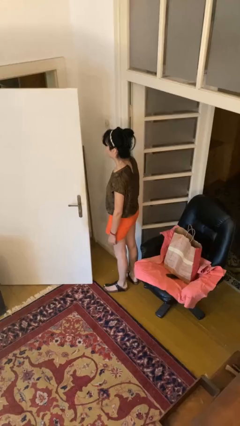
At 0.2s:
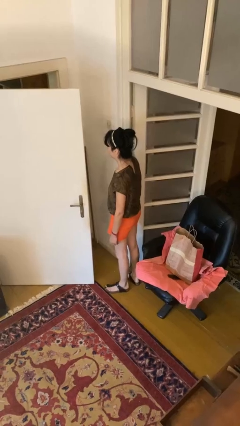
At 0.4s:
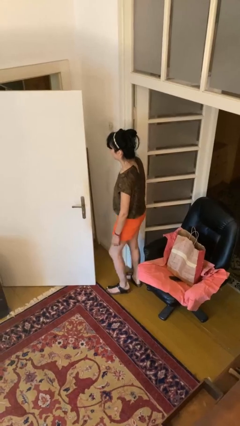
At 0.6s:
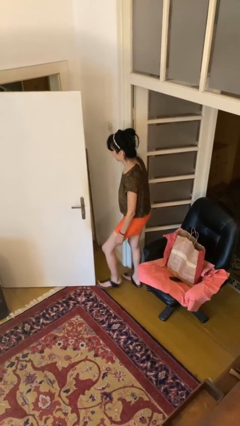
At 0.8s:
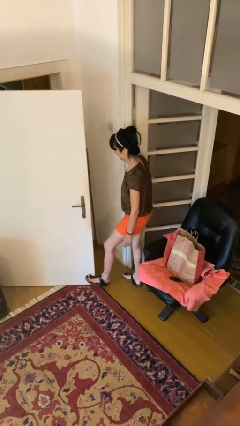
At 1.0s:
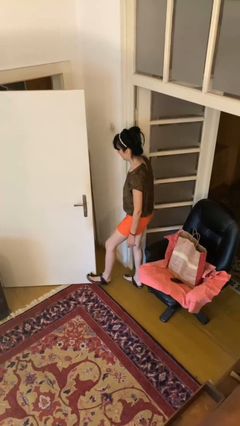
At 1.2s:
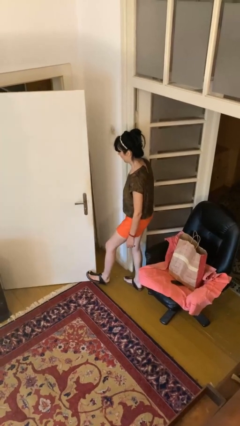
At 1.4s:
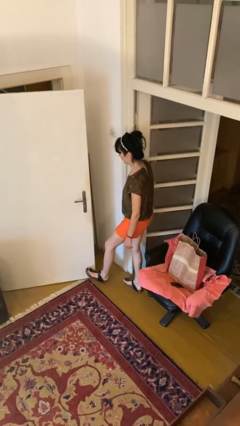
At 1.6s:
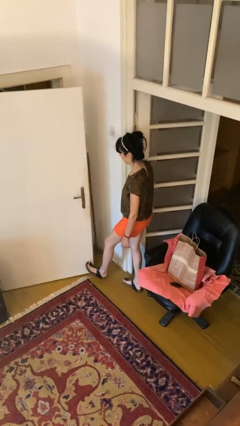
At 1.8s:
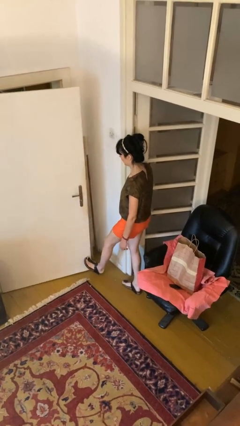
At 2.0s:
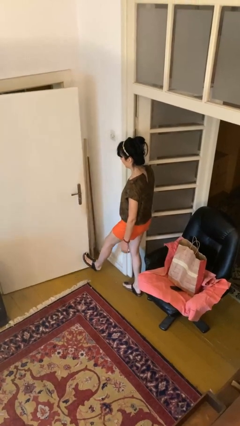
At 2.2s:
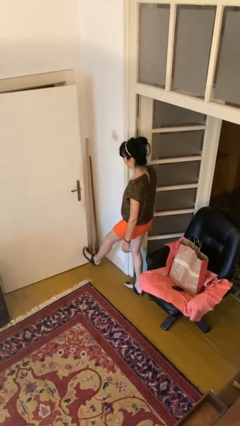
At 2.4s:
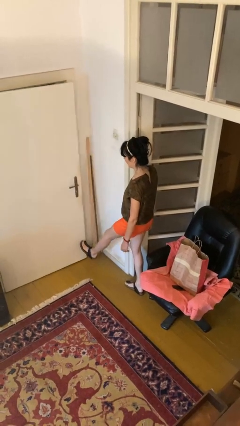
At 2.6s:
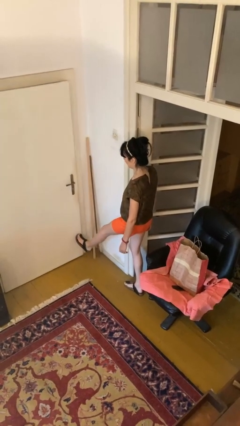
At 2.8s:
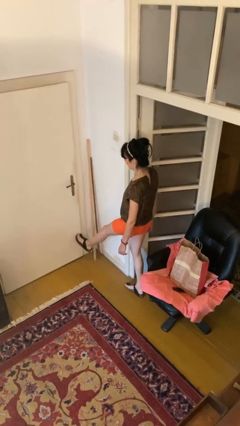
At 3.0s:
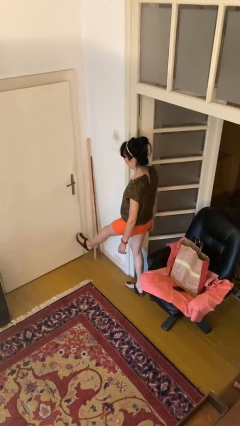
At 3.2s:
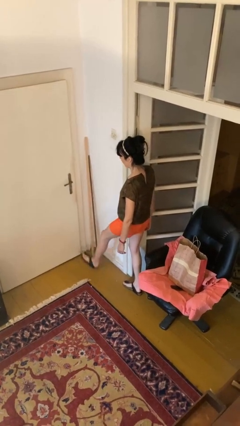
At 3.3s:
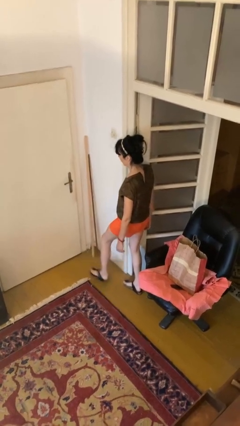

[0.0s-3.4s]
person closes door with foot

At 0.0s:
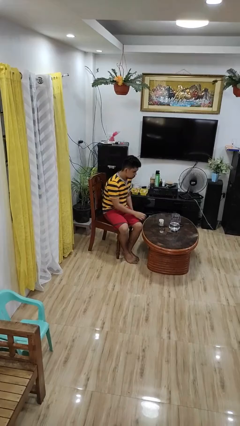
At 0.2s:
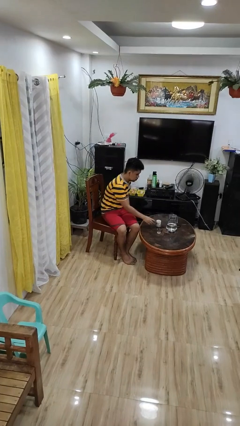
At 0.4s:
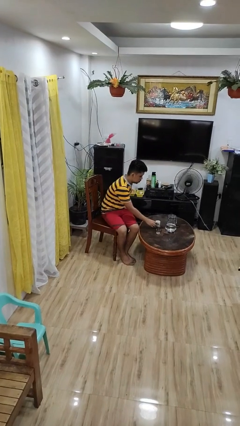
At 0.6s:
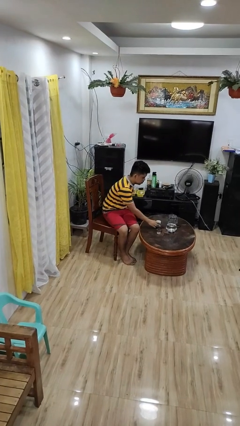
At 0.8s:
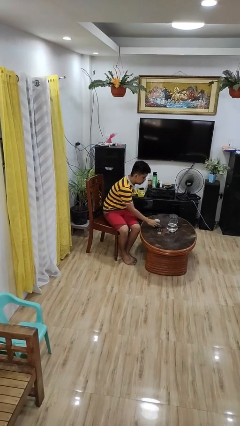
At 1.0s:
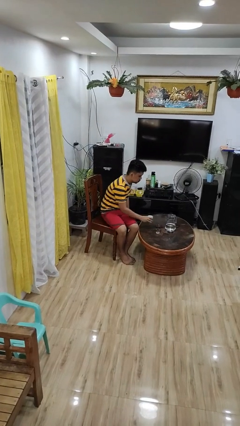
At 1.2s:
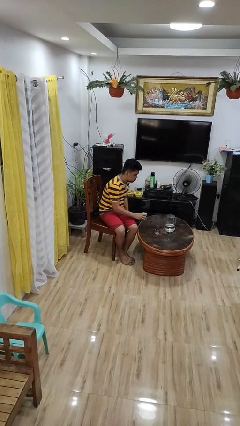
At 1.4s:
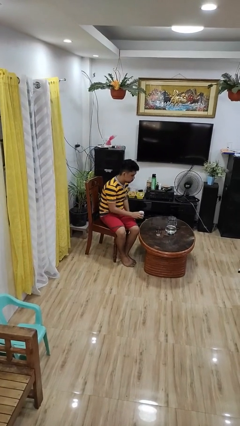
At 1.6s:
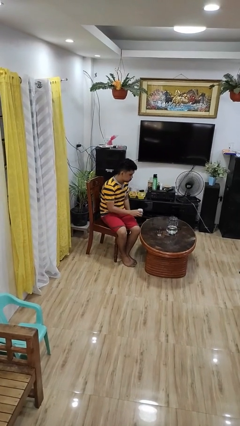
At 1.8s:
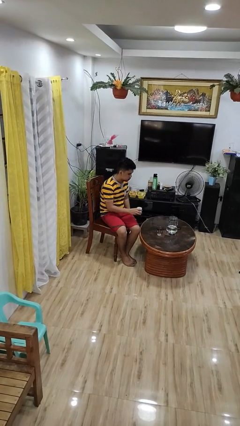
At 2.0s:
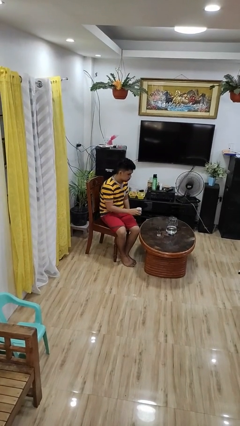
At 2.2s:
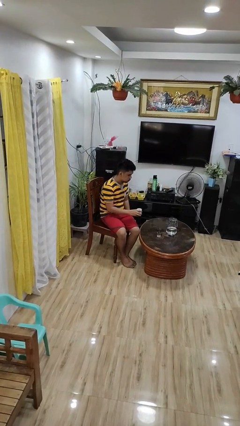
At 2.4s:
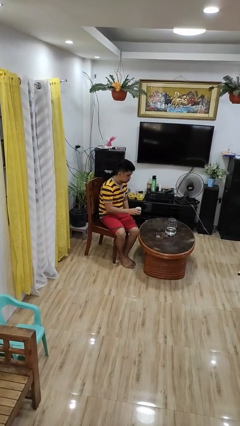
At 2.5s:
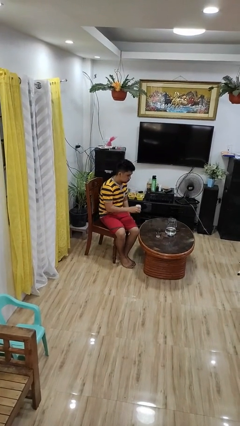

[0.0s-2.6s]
person picks up object from table

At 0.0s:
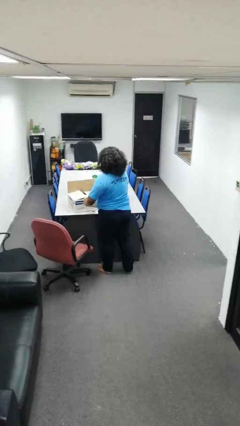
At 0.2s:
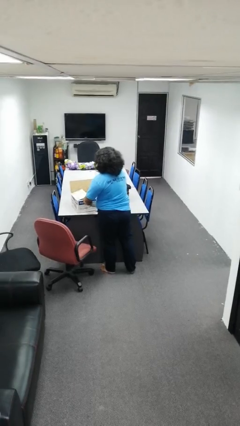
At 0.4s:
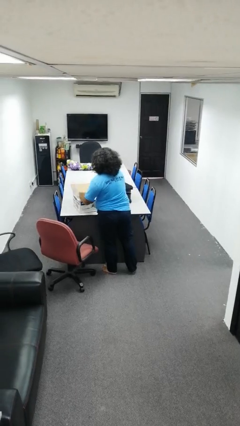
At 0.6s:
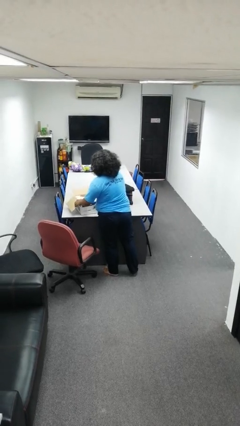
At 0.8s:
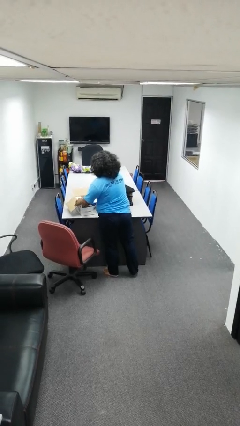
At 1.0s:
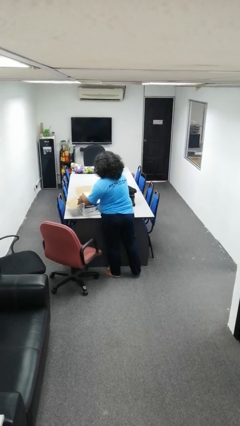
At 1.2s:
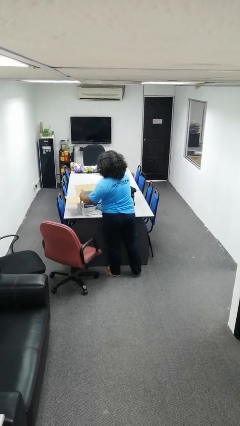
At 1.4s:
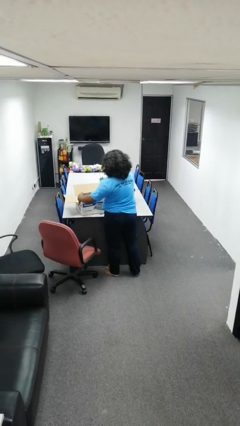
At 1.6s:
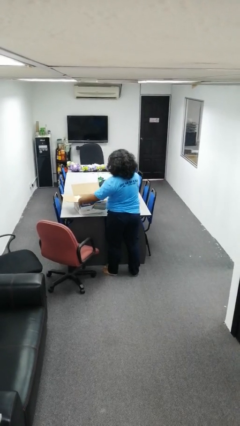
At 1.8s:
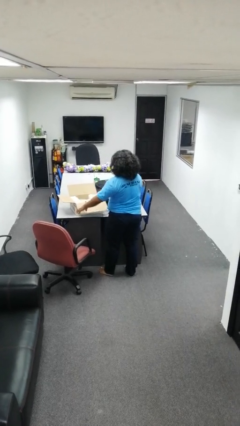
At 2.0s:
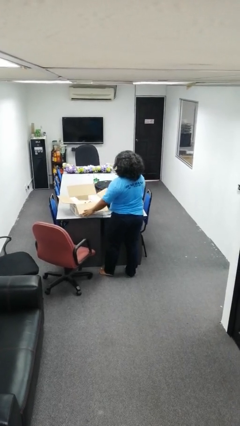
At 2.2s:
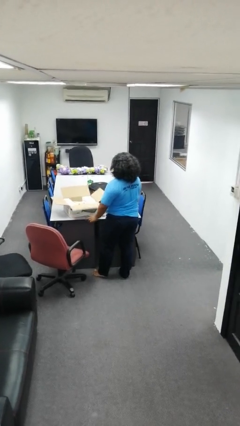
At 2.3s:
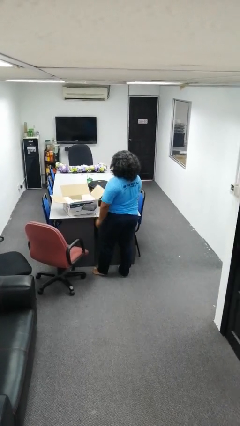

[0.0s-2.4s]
person opens box

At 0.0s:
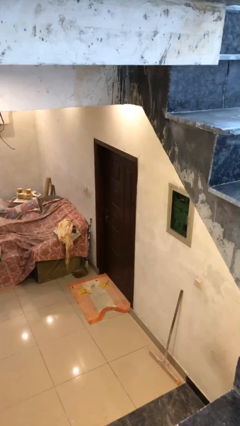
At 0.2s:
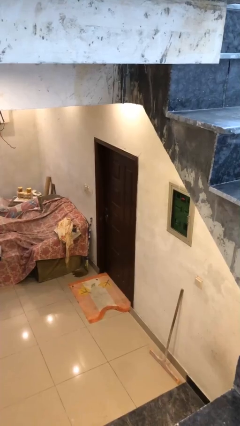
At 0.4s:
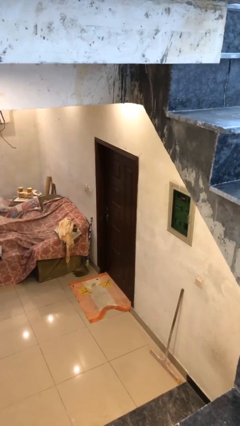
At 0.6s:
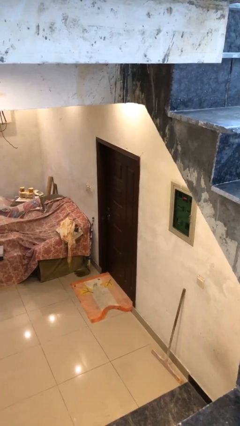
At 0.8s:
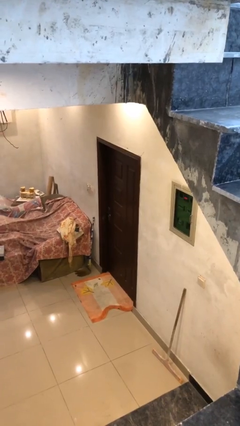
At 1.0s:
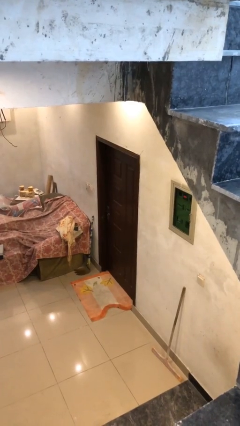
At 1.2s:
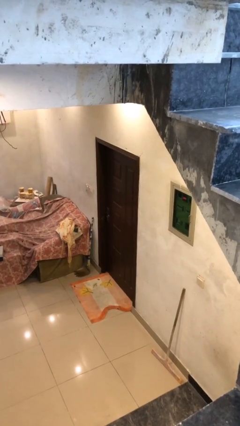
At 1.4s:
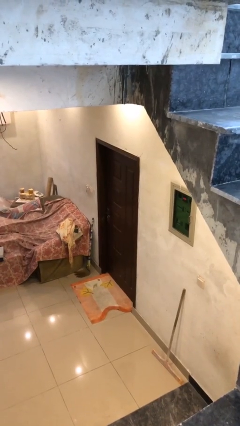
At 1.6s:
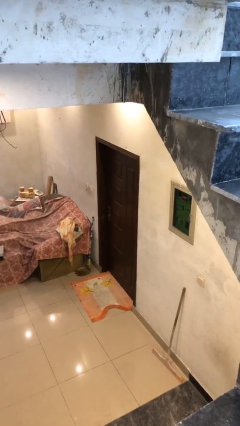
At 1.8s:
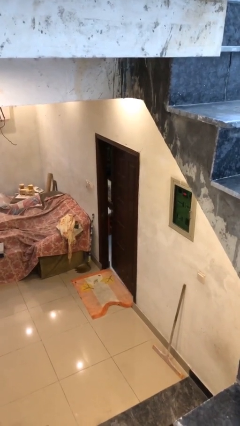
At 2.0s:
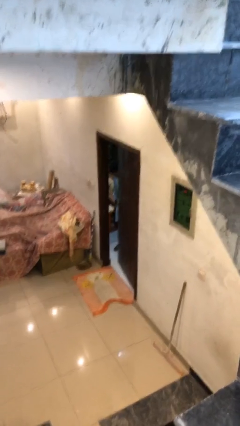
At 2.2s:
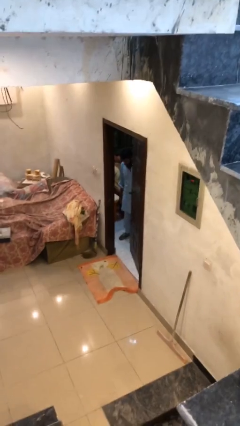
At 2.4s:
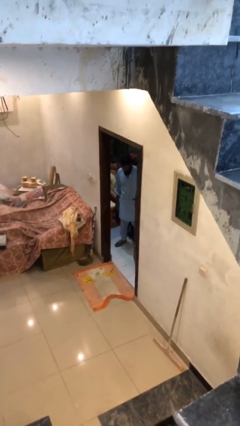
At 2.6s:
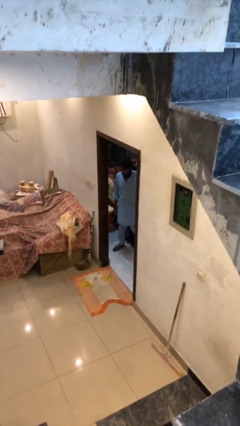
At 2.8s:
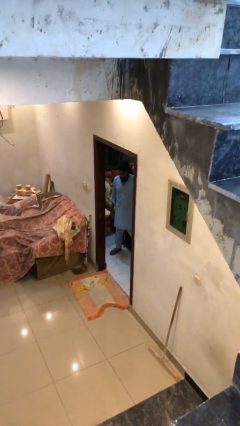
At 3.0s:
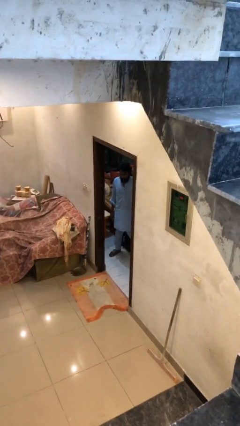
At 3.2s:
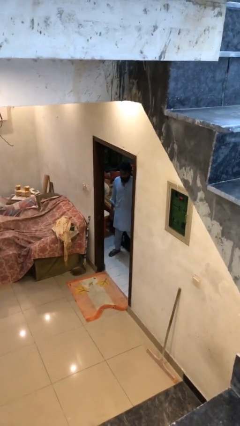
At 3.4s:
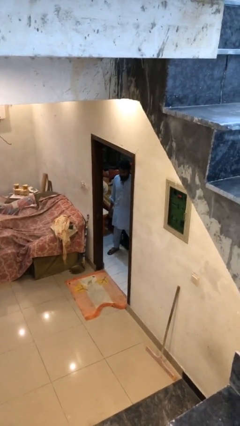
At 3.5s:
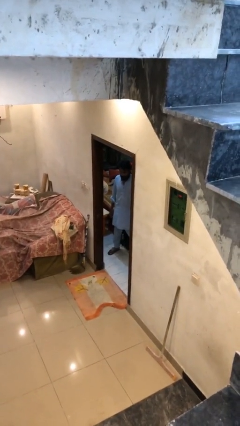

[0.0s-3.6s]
person opens facility door

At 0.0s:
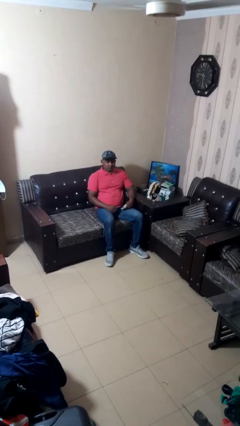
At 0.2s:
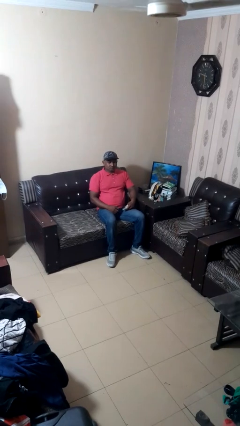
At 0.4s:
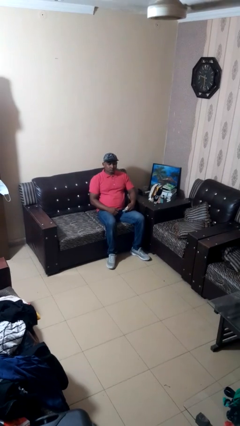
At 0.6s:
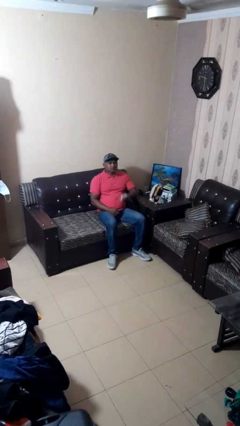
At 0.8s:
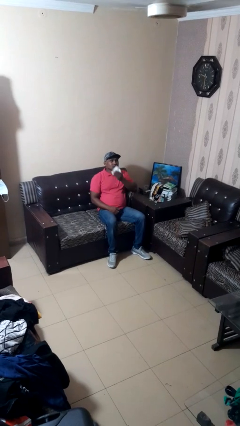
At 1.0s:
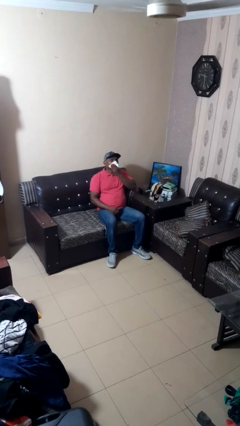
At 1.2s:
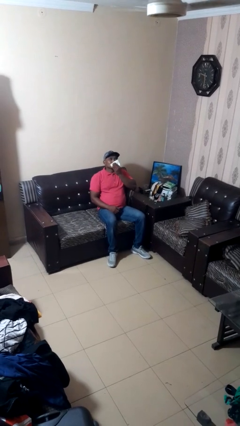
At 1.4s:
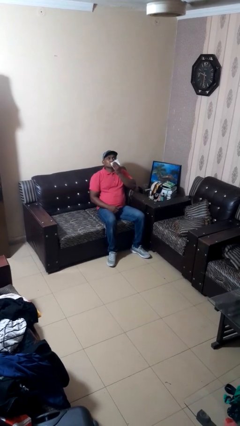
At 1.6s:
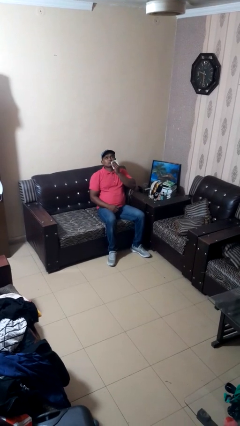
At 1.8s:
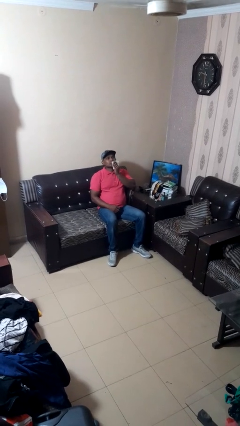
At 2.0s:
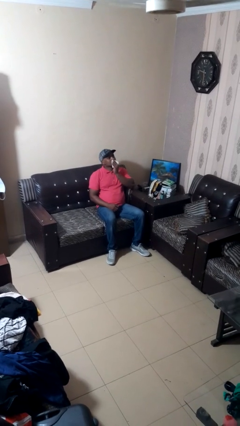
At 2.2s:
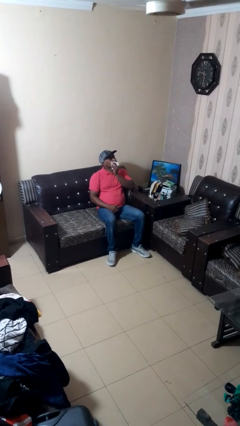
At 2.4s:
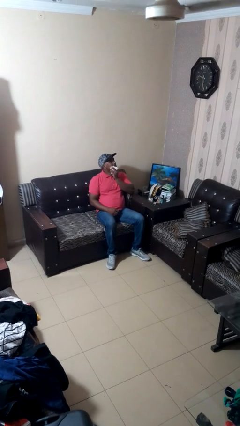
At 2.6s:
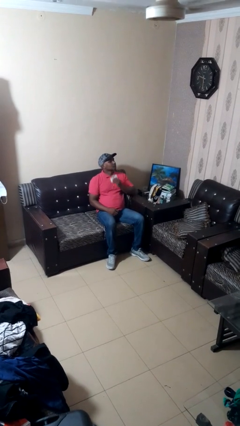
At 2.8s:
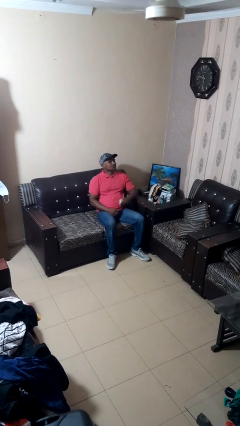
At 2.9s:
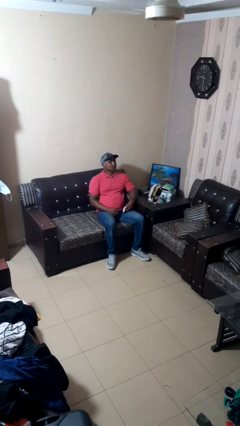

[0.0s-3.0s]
person wipes mouth with napkin

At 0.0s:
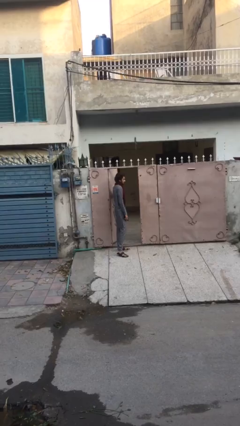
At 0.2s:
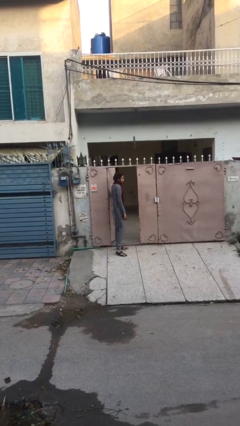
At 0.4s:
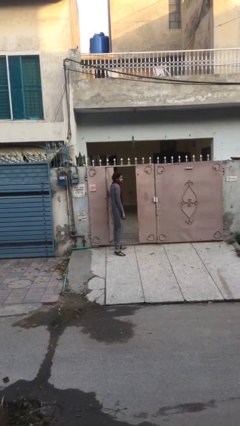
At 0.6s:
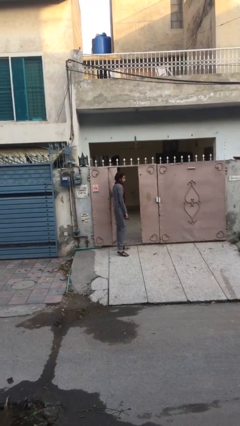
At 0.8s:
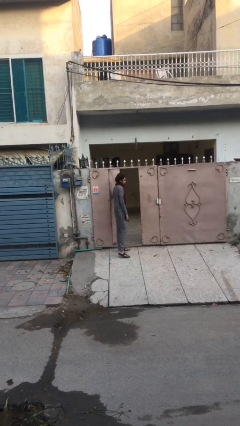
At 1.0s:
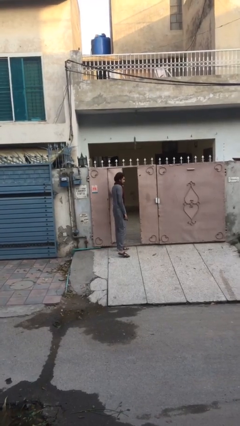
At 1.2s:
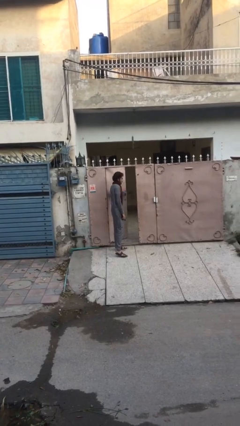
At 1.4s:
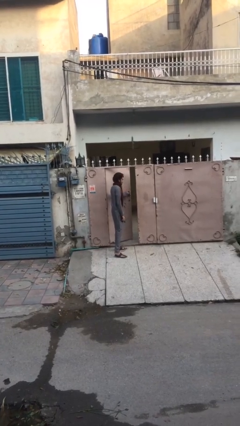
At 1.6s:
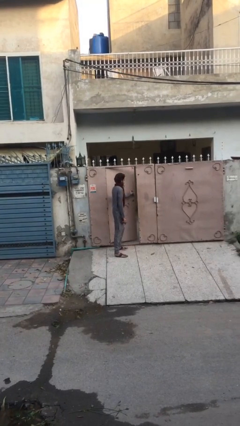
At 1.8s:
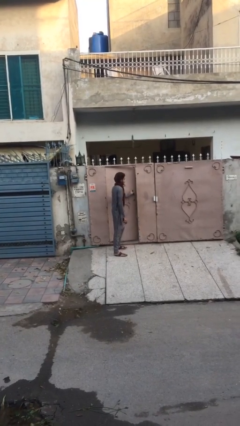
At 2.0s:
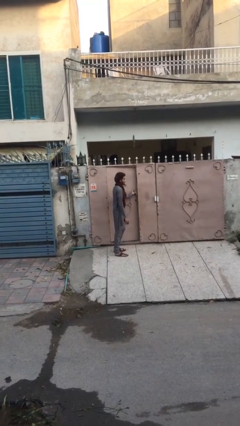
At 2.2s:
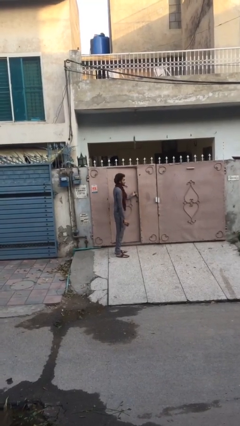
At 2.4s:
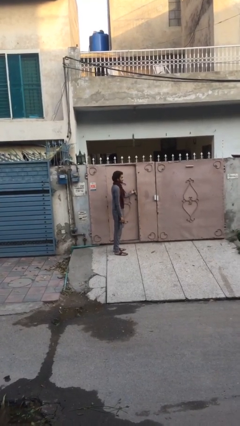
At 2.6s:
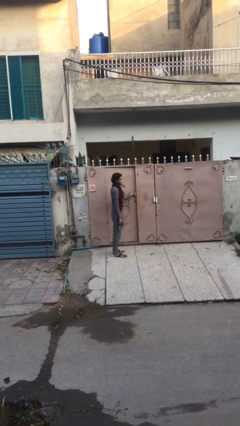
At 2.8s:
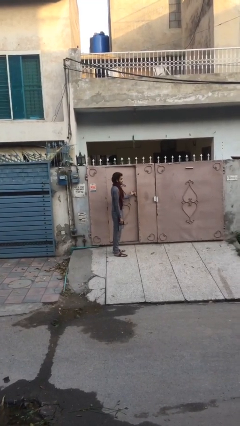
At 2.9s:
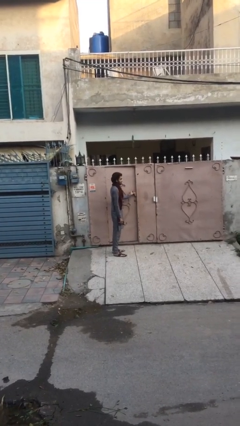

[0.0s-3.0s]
person closes facility door
